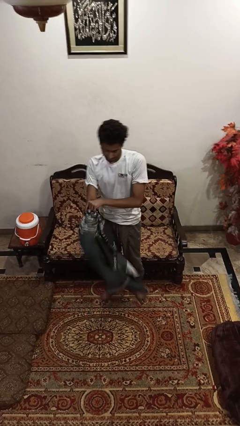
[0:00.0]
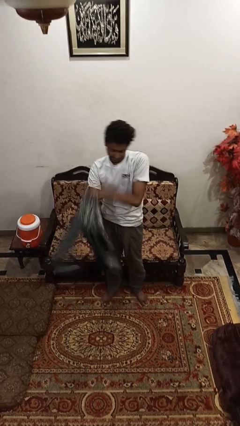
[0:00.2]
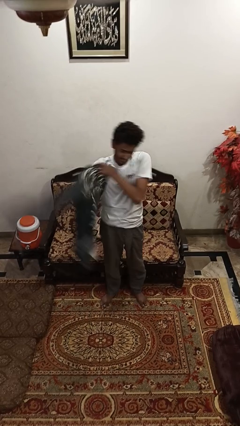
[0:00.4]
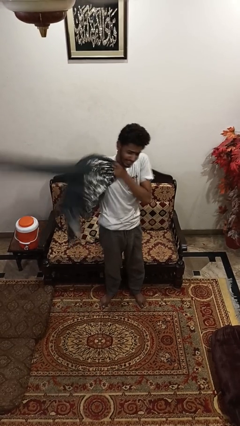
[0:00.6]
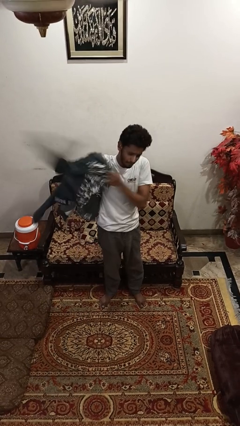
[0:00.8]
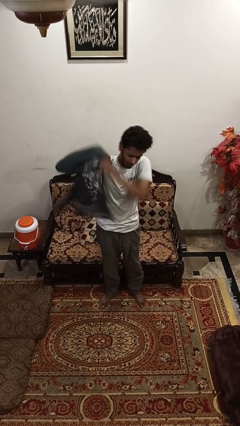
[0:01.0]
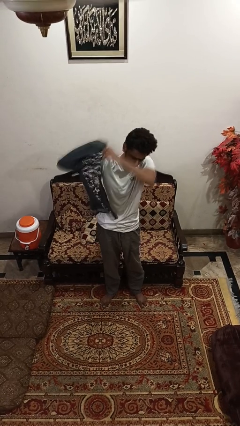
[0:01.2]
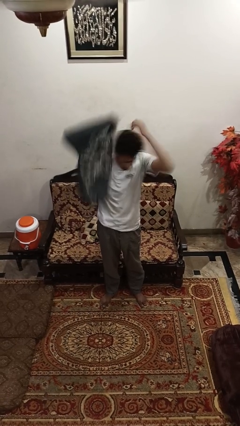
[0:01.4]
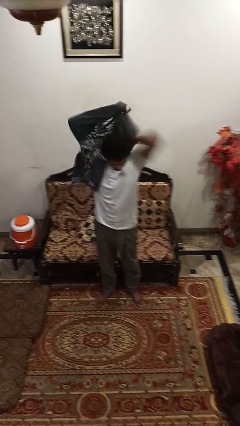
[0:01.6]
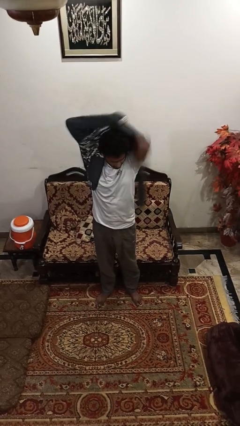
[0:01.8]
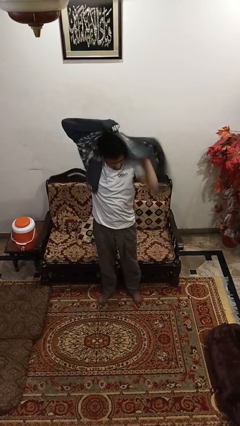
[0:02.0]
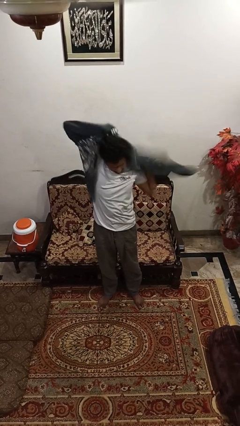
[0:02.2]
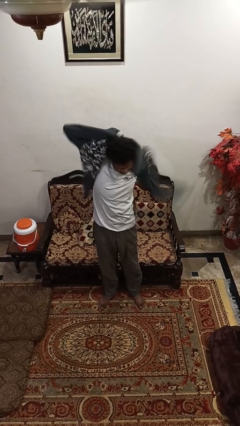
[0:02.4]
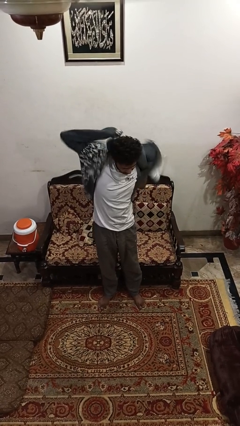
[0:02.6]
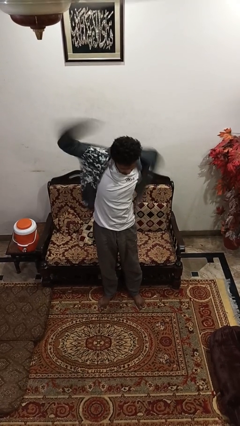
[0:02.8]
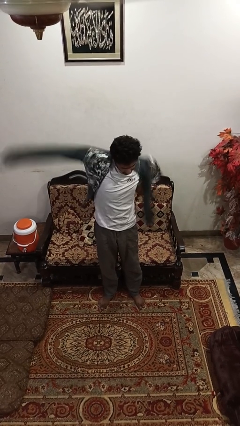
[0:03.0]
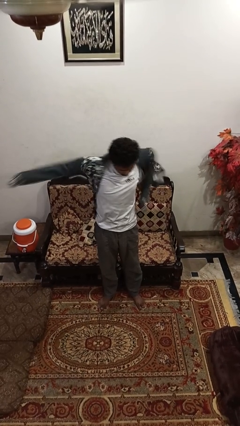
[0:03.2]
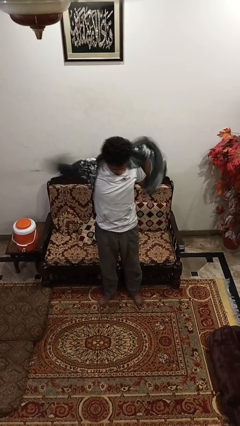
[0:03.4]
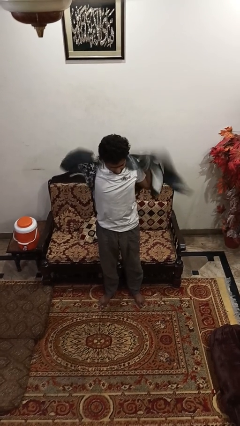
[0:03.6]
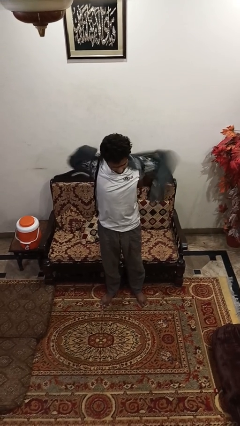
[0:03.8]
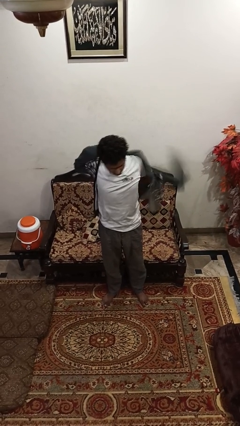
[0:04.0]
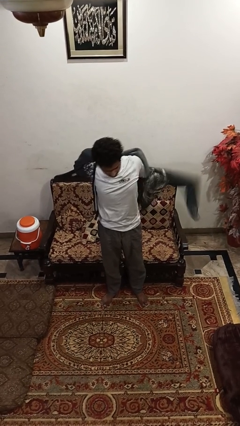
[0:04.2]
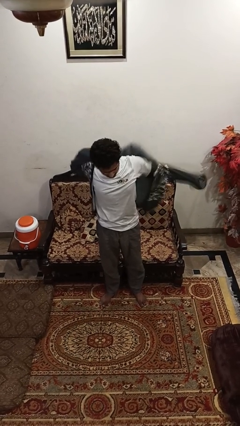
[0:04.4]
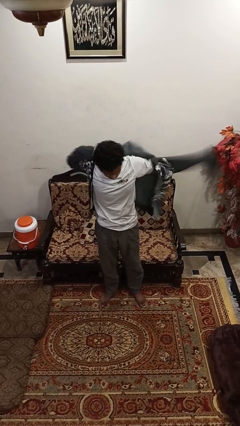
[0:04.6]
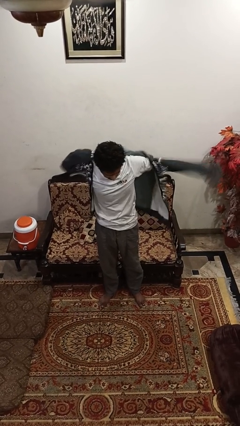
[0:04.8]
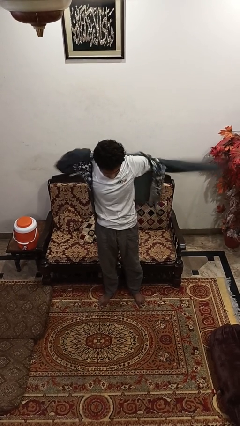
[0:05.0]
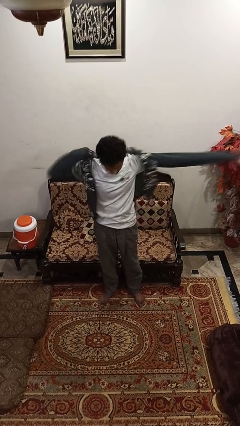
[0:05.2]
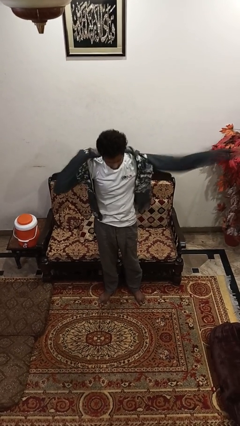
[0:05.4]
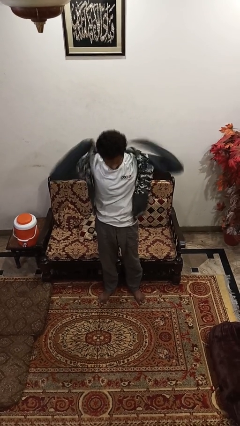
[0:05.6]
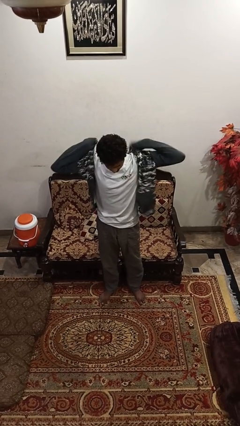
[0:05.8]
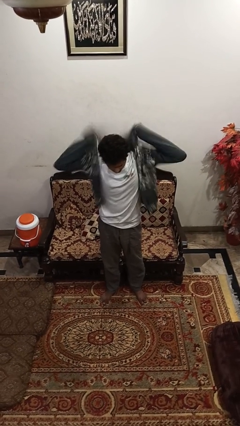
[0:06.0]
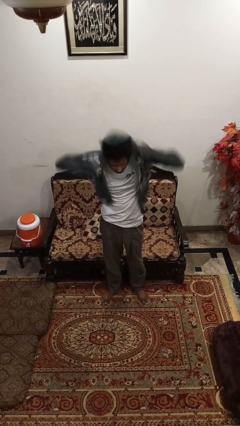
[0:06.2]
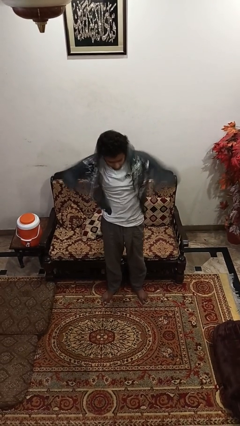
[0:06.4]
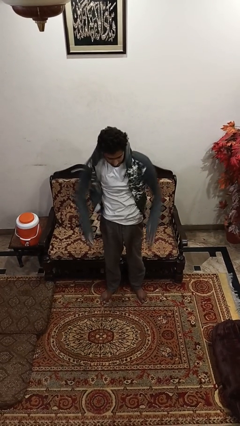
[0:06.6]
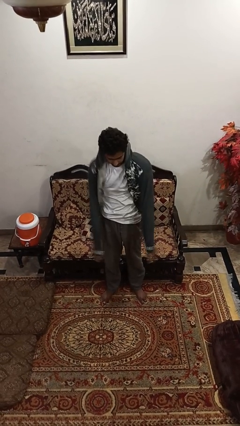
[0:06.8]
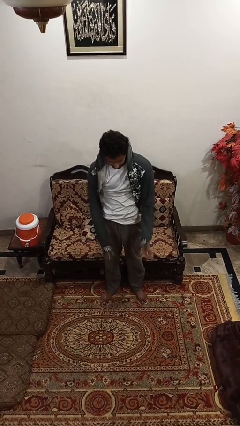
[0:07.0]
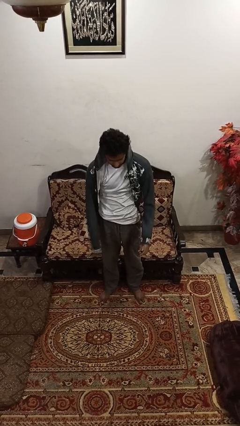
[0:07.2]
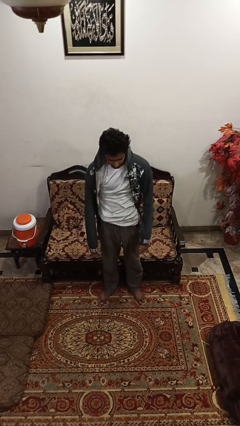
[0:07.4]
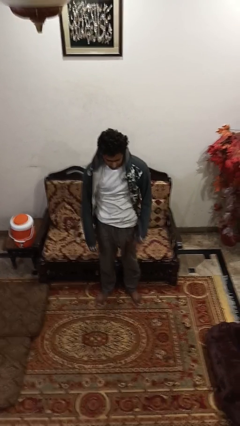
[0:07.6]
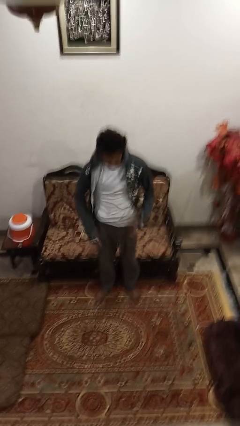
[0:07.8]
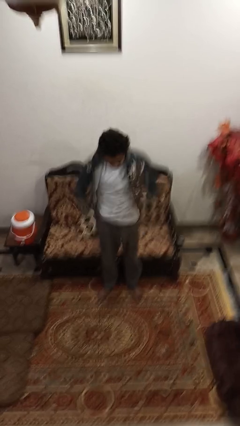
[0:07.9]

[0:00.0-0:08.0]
person puts on hoodie

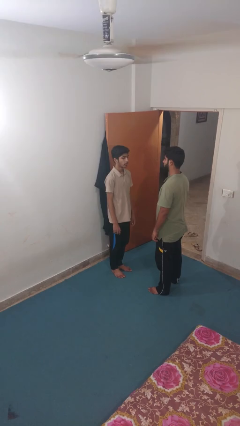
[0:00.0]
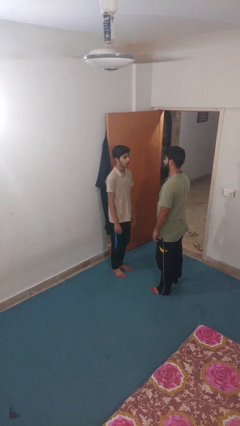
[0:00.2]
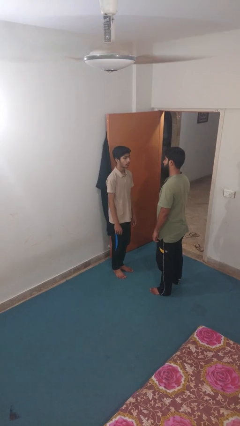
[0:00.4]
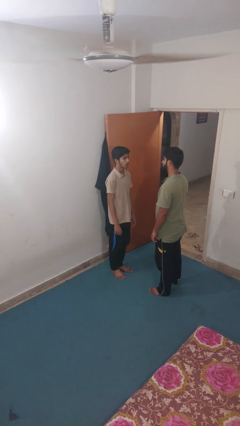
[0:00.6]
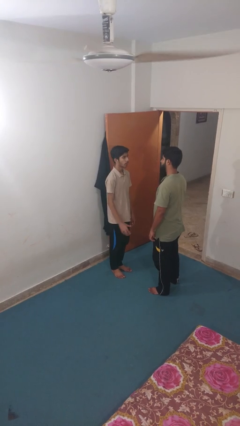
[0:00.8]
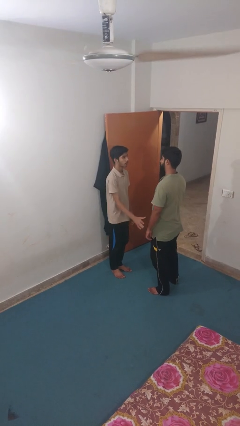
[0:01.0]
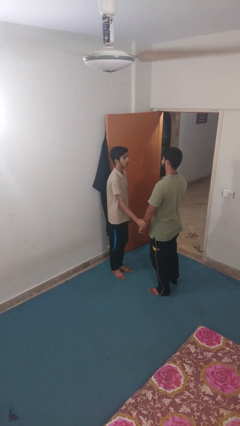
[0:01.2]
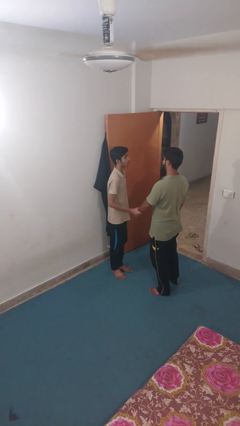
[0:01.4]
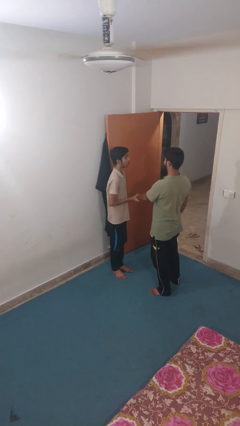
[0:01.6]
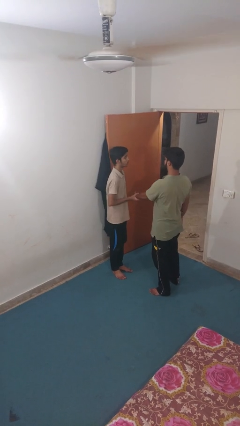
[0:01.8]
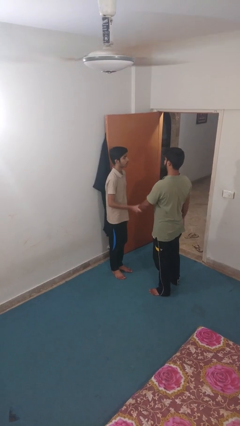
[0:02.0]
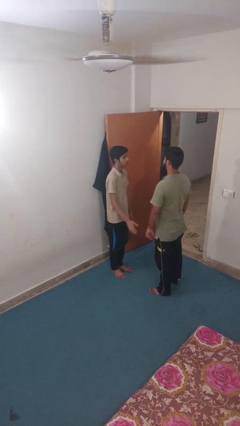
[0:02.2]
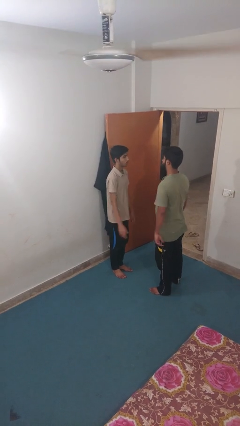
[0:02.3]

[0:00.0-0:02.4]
person grabs person by forearm

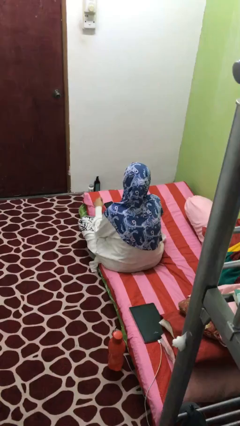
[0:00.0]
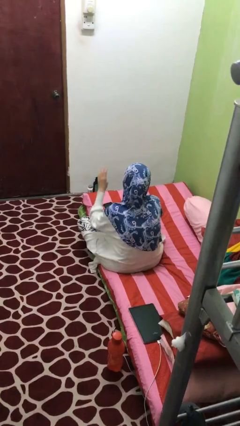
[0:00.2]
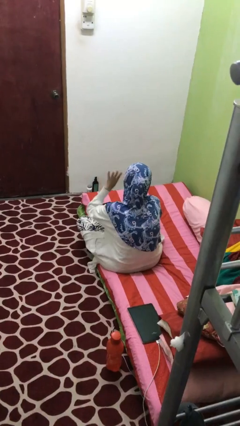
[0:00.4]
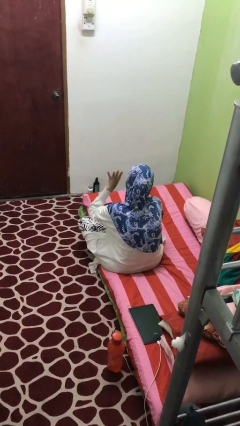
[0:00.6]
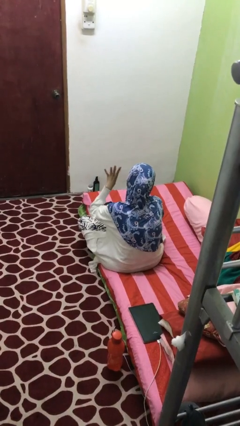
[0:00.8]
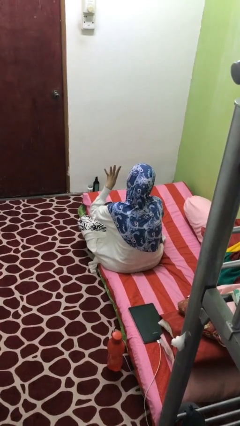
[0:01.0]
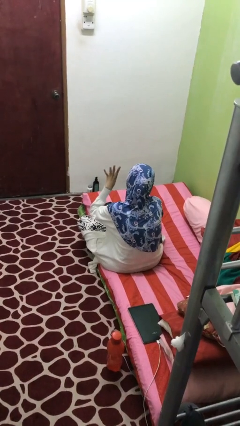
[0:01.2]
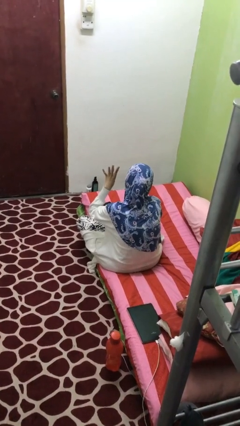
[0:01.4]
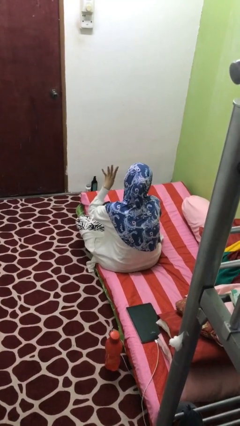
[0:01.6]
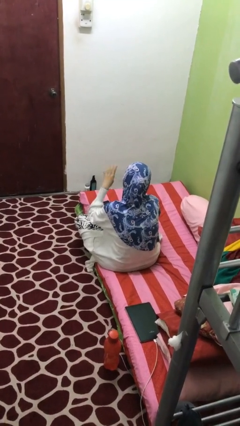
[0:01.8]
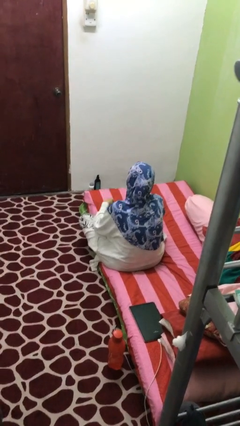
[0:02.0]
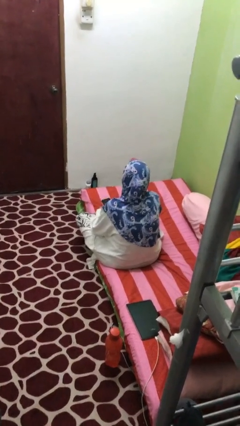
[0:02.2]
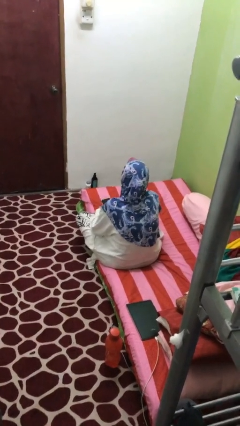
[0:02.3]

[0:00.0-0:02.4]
person gestures number four

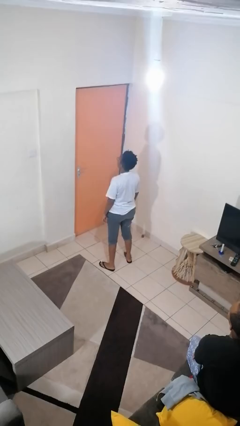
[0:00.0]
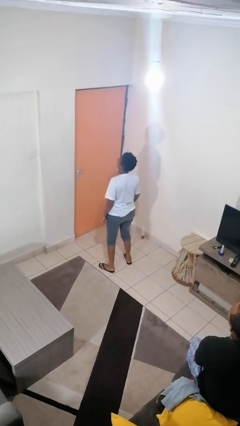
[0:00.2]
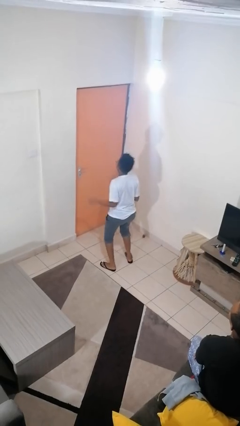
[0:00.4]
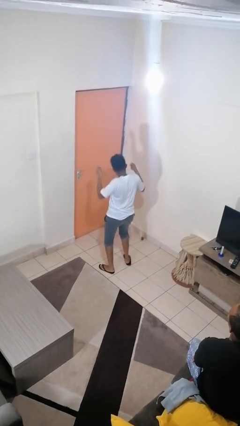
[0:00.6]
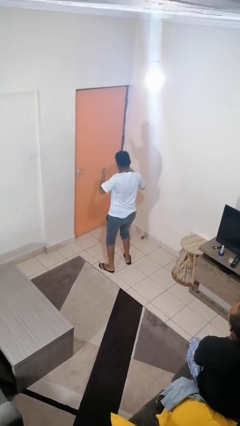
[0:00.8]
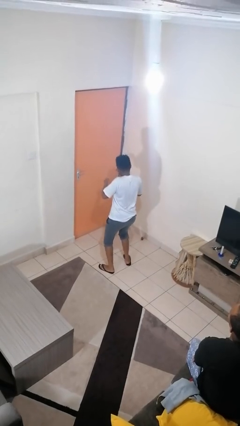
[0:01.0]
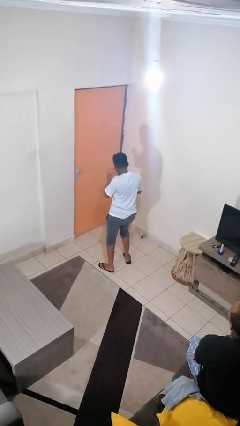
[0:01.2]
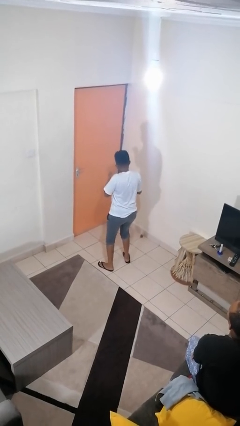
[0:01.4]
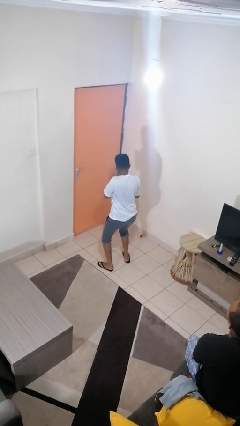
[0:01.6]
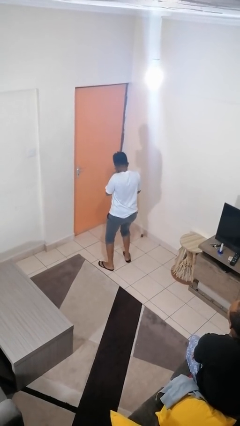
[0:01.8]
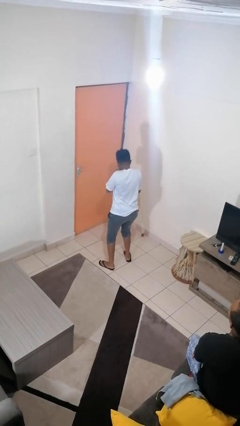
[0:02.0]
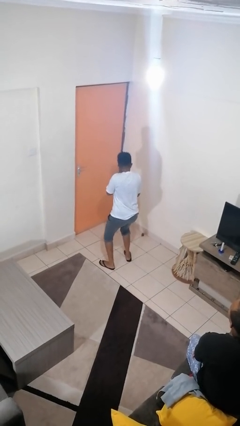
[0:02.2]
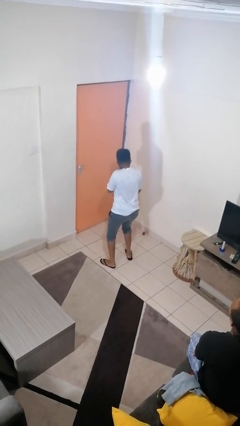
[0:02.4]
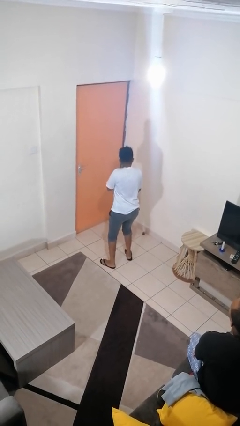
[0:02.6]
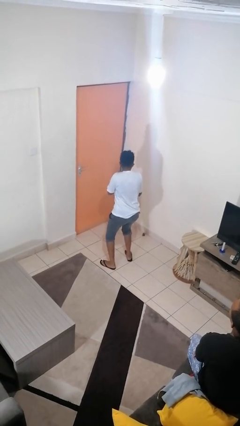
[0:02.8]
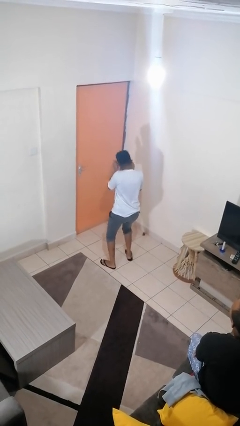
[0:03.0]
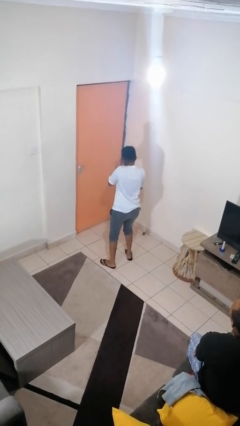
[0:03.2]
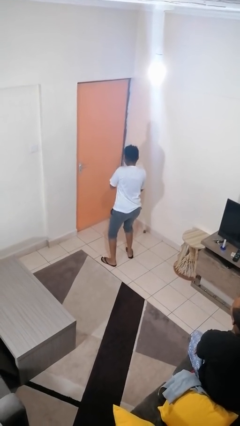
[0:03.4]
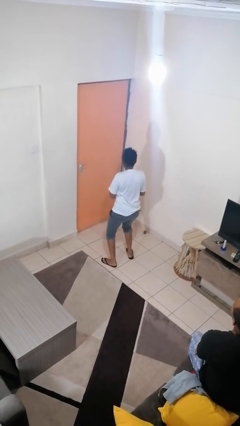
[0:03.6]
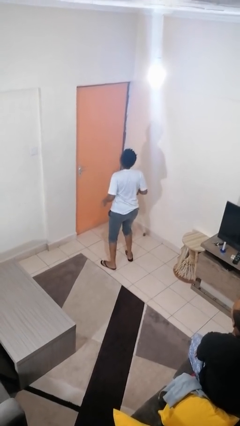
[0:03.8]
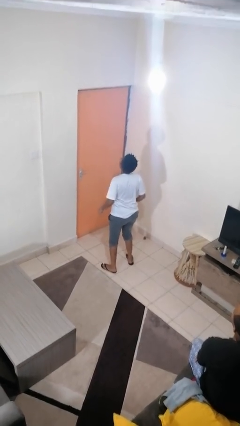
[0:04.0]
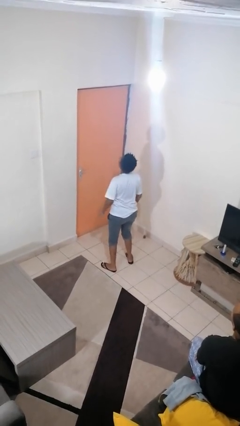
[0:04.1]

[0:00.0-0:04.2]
person dances in place

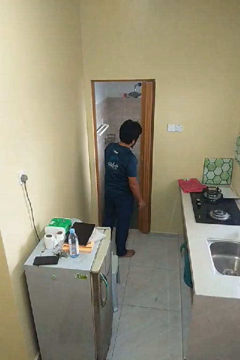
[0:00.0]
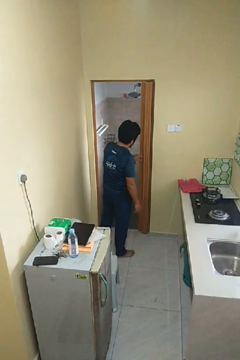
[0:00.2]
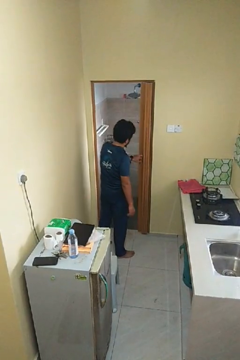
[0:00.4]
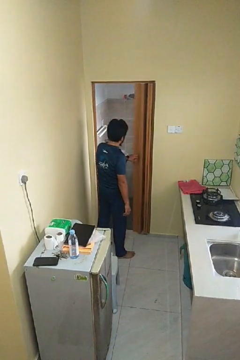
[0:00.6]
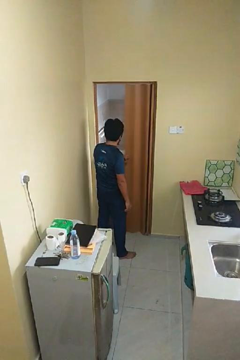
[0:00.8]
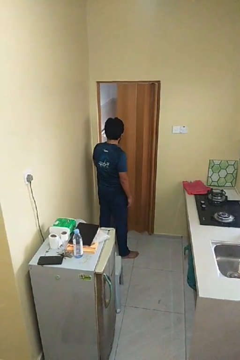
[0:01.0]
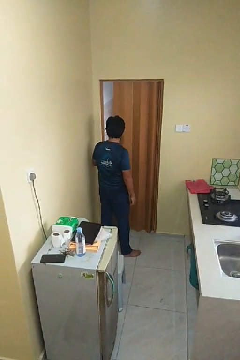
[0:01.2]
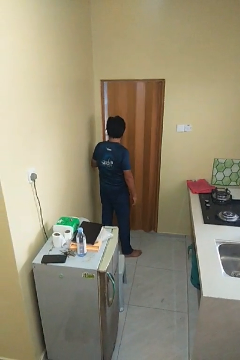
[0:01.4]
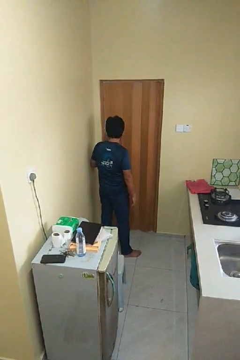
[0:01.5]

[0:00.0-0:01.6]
person closes sliding door
